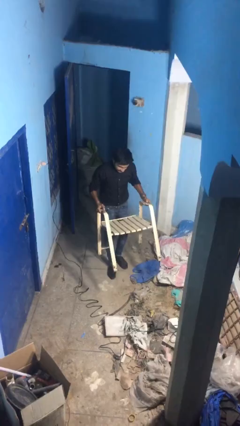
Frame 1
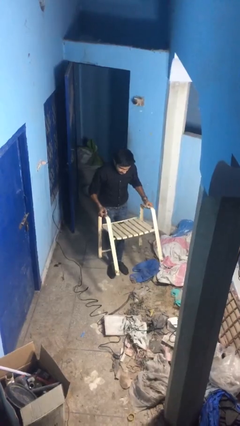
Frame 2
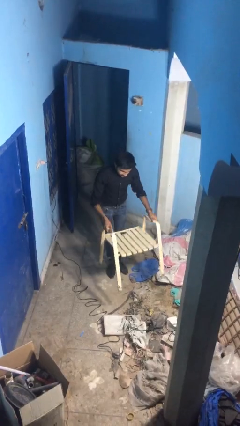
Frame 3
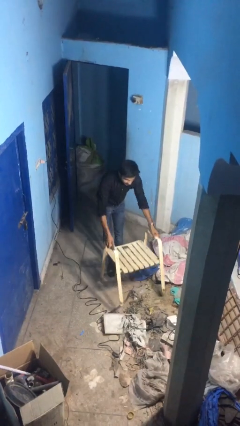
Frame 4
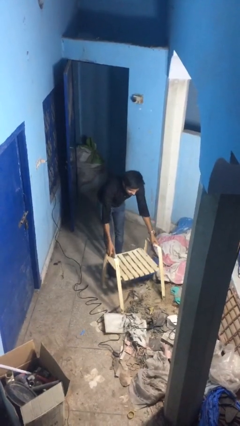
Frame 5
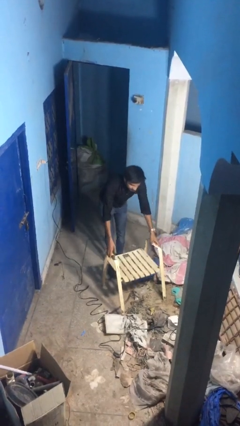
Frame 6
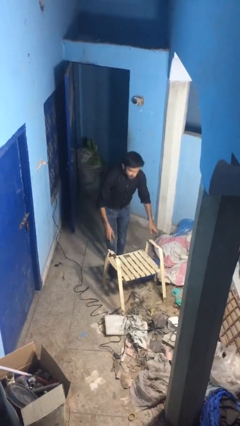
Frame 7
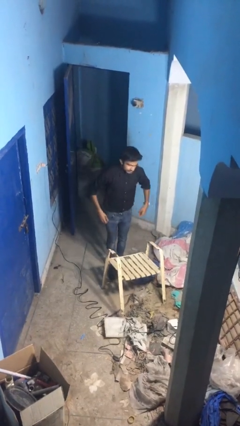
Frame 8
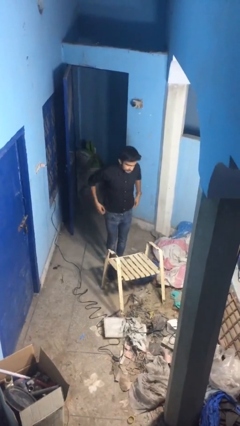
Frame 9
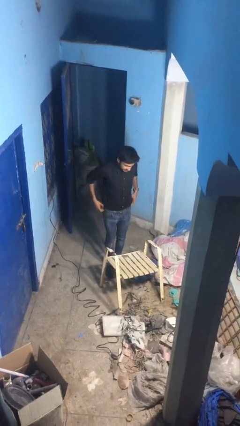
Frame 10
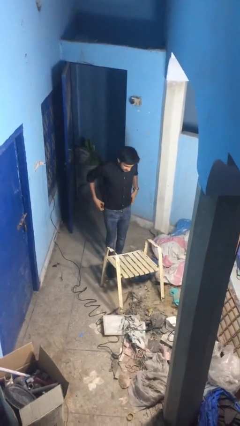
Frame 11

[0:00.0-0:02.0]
person puts down object on floor

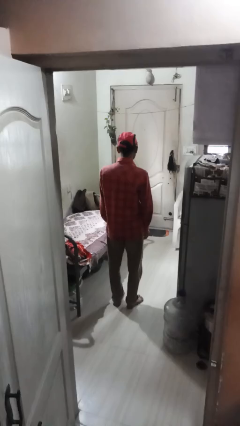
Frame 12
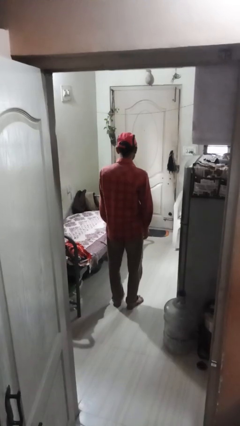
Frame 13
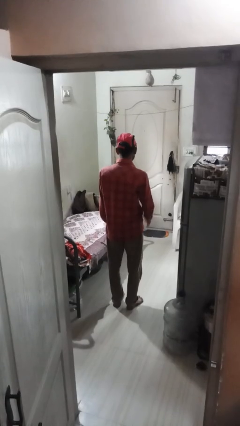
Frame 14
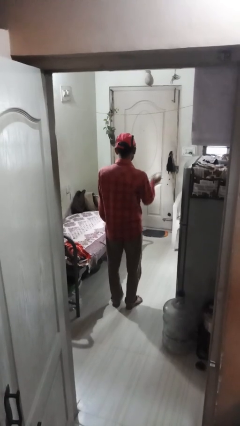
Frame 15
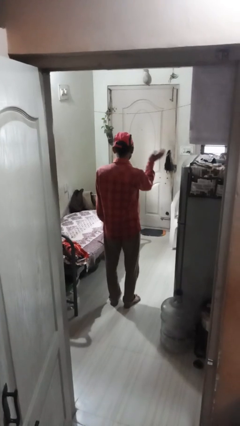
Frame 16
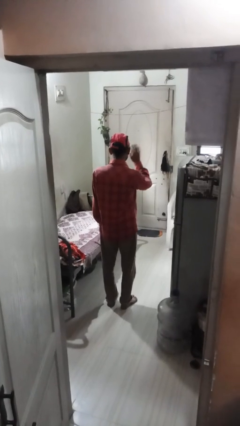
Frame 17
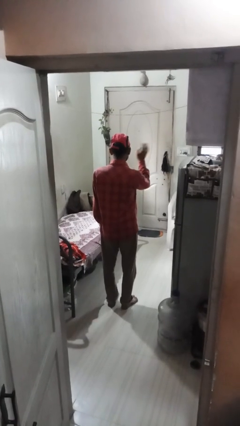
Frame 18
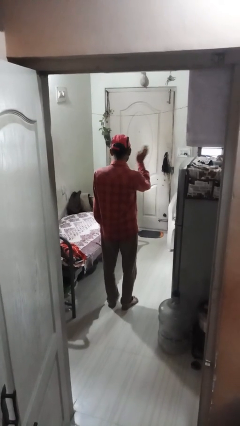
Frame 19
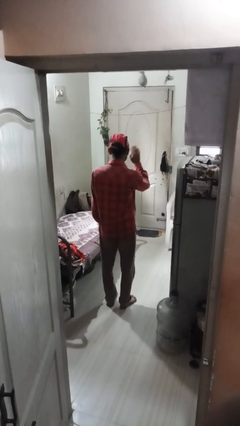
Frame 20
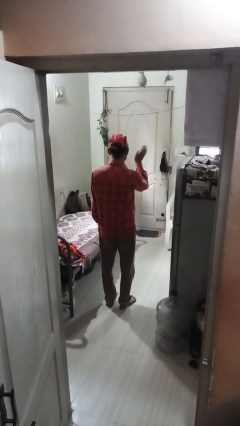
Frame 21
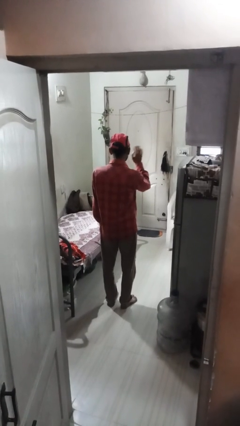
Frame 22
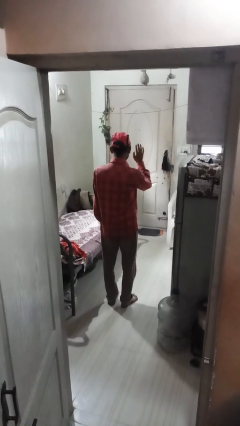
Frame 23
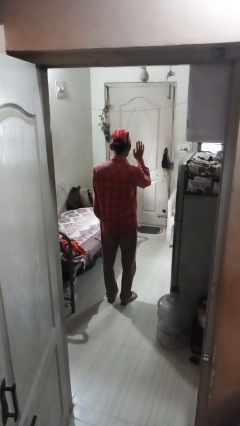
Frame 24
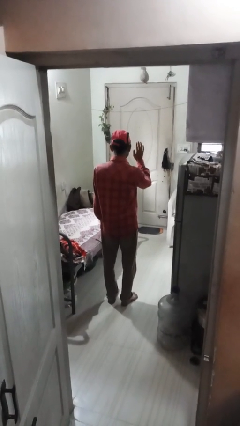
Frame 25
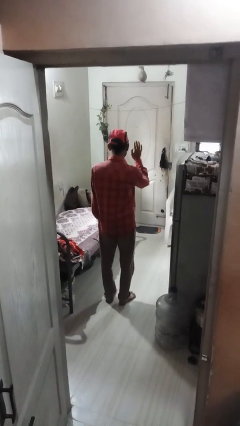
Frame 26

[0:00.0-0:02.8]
person waves at person

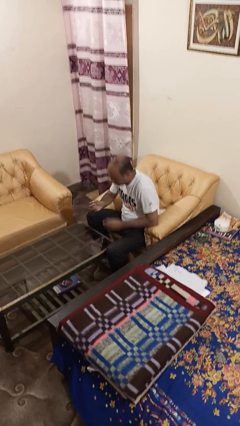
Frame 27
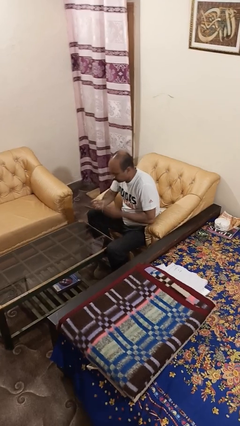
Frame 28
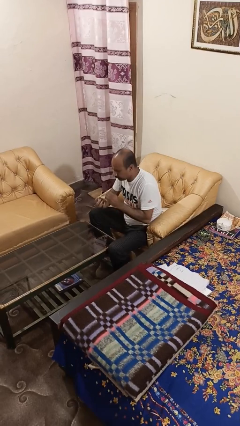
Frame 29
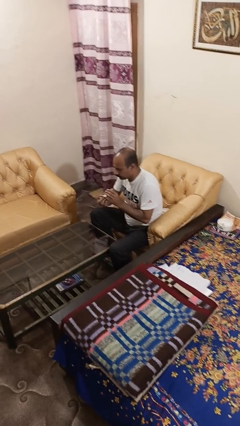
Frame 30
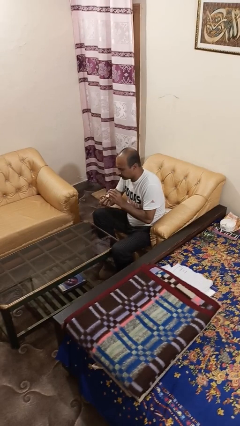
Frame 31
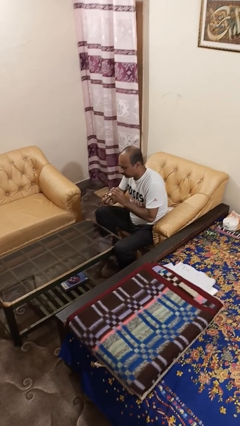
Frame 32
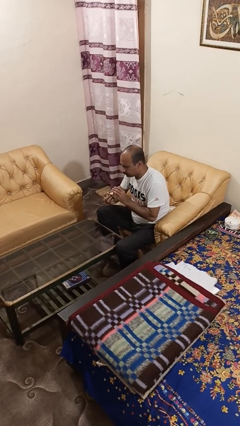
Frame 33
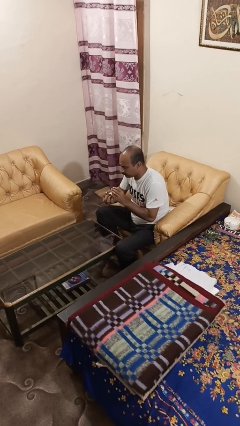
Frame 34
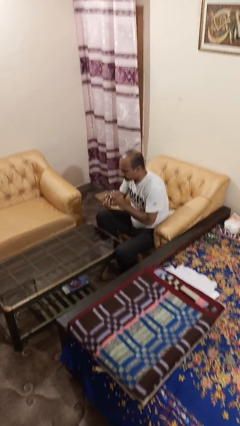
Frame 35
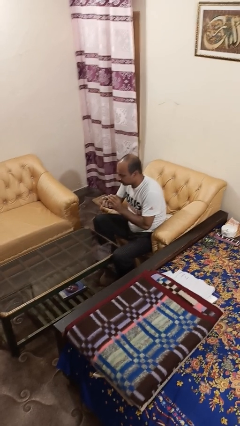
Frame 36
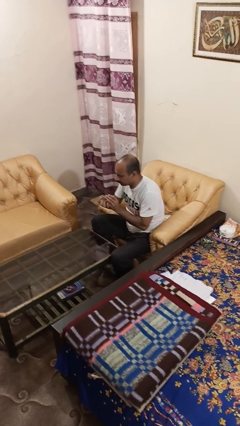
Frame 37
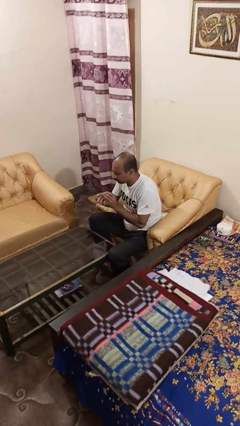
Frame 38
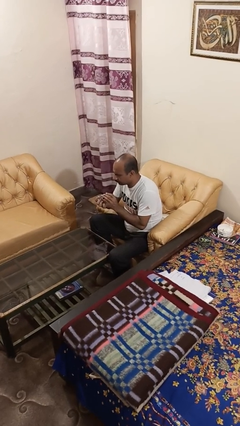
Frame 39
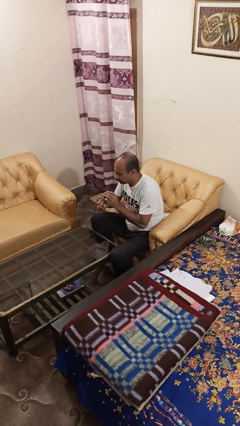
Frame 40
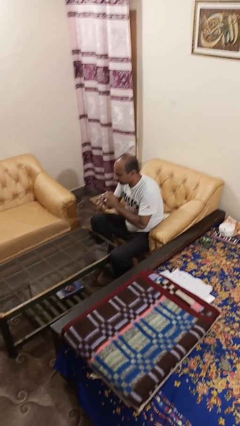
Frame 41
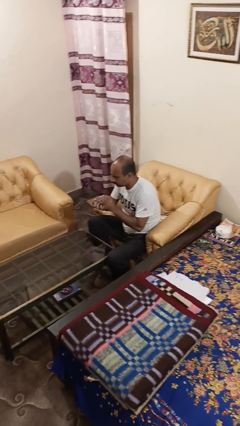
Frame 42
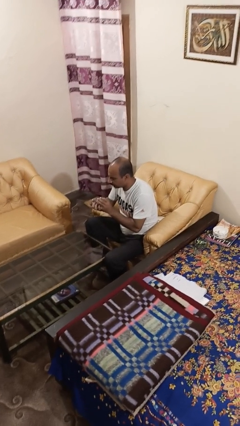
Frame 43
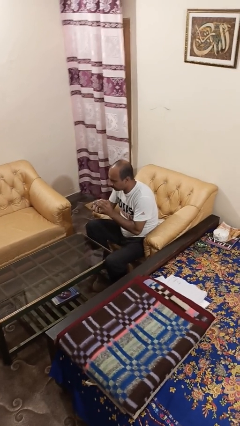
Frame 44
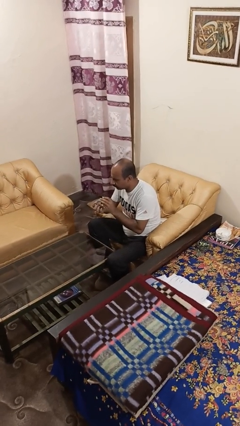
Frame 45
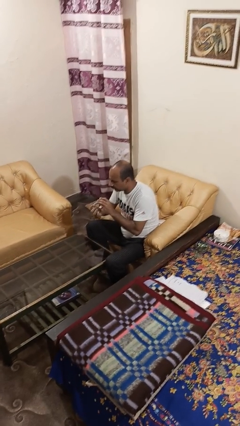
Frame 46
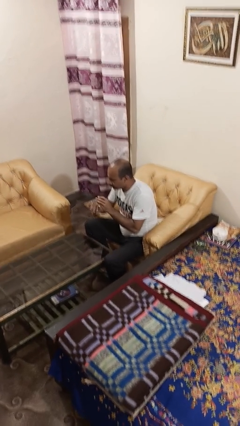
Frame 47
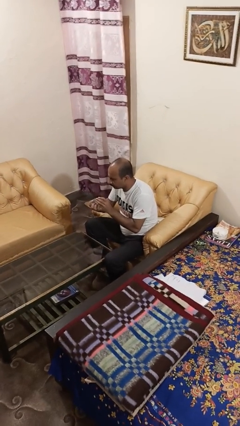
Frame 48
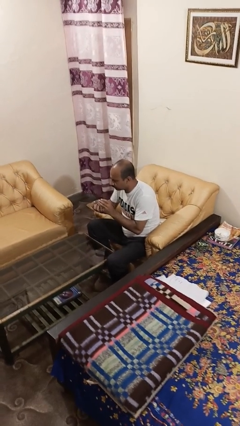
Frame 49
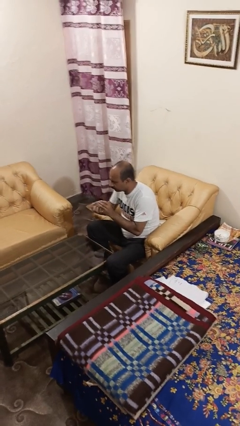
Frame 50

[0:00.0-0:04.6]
person clips fingernails

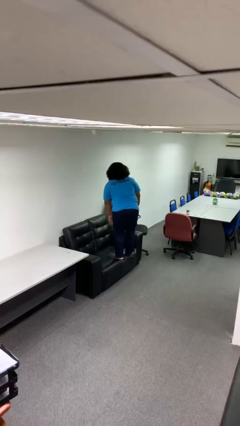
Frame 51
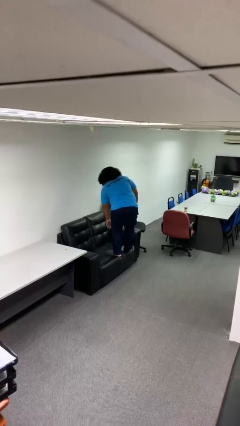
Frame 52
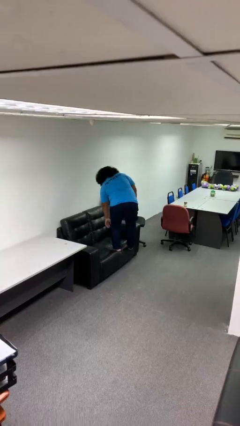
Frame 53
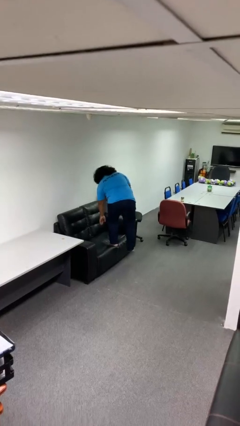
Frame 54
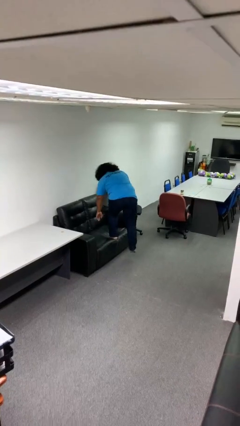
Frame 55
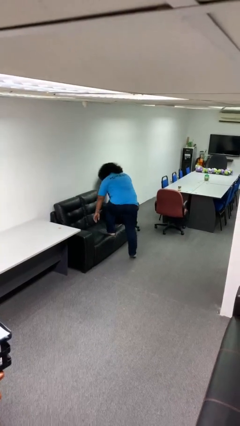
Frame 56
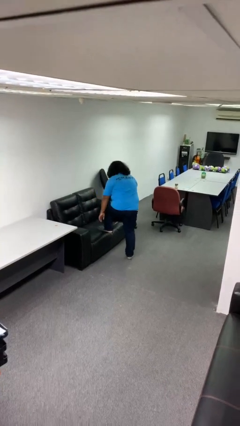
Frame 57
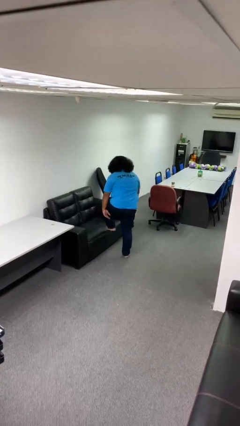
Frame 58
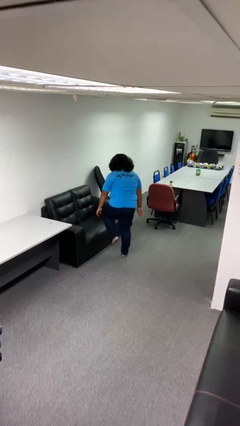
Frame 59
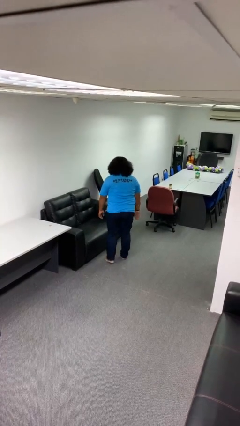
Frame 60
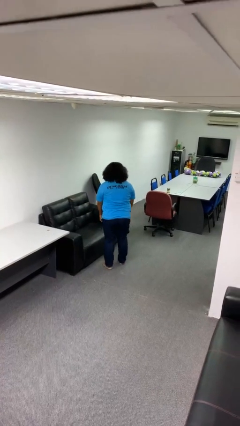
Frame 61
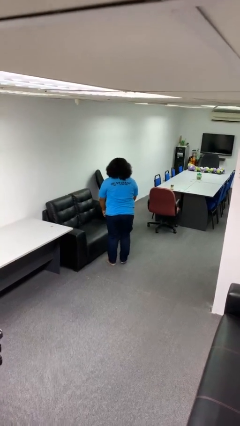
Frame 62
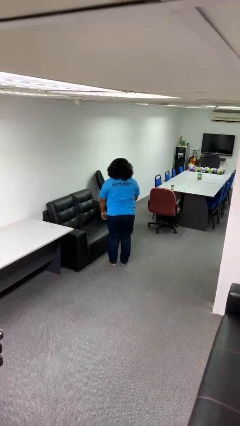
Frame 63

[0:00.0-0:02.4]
person climbs off couch

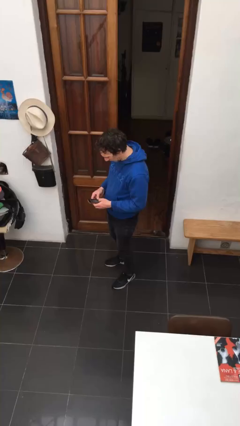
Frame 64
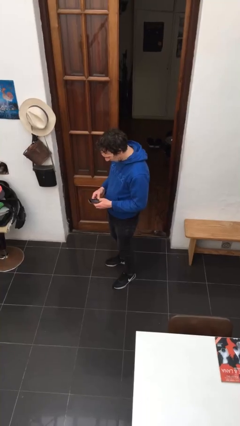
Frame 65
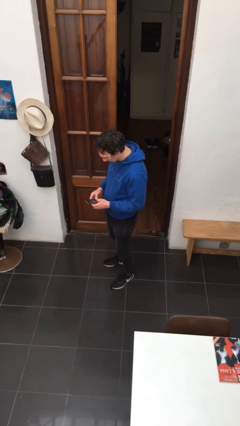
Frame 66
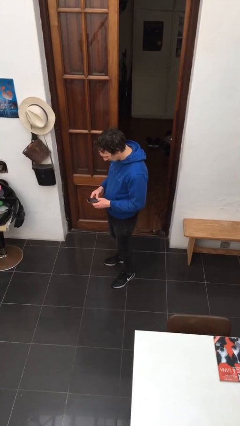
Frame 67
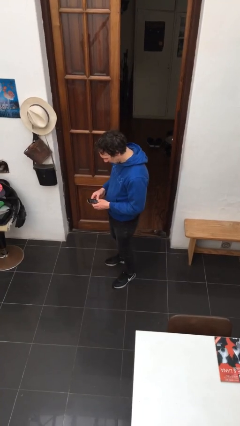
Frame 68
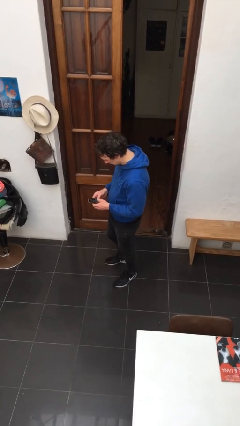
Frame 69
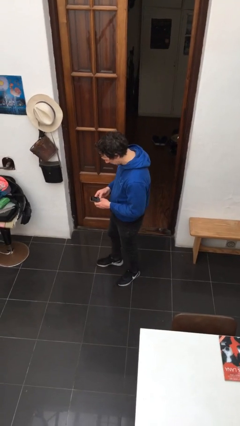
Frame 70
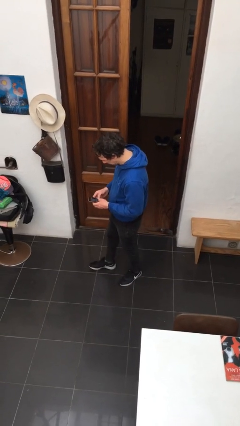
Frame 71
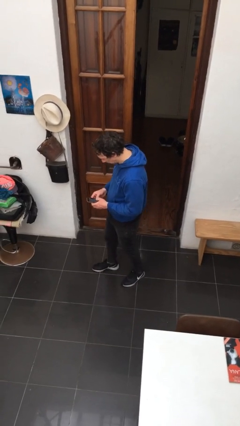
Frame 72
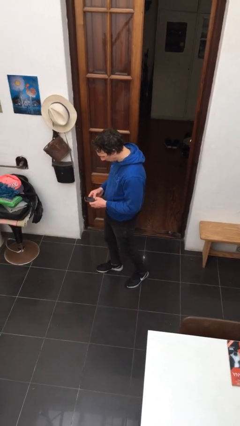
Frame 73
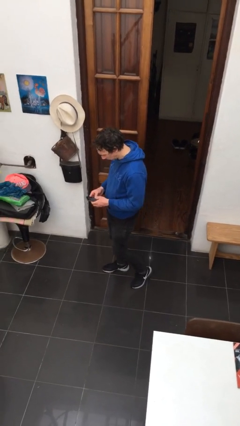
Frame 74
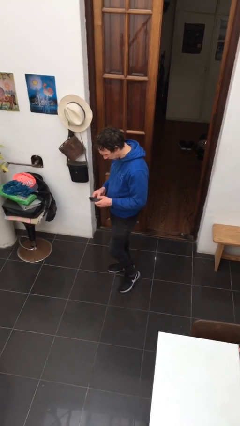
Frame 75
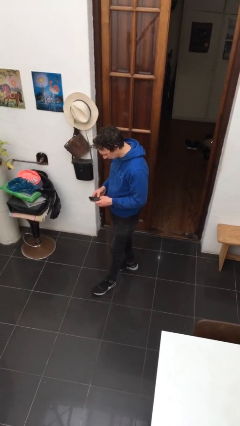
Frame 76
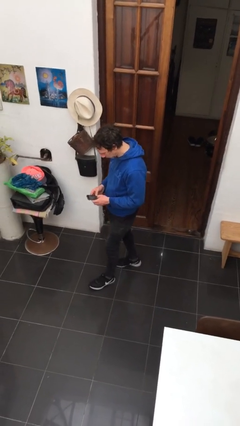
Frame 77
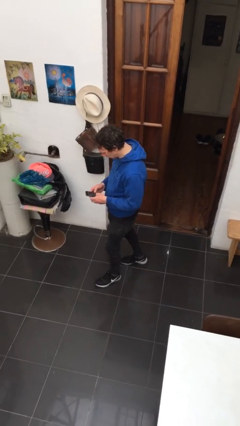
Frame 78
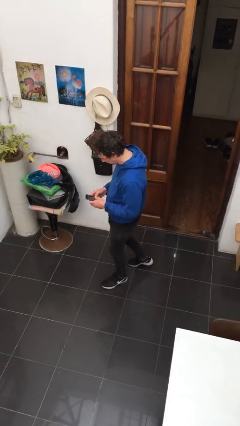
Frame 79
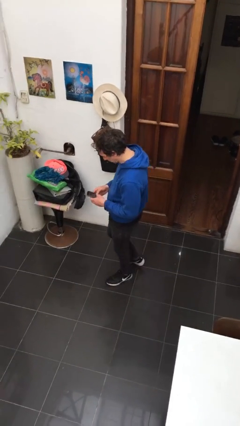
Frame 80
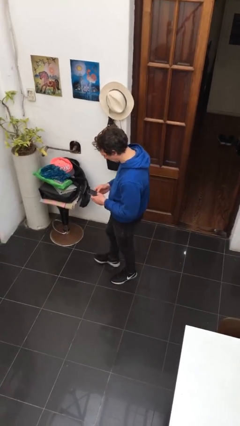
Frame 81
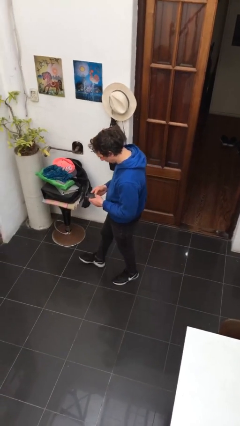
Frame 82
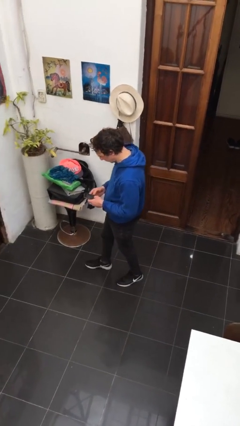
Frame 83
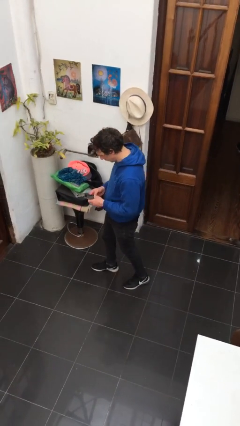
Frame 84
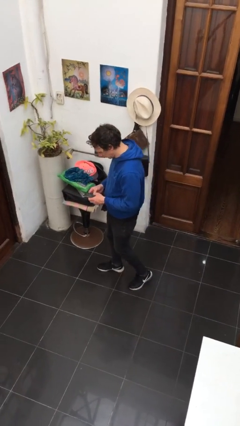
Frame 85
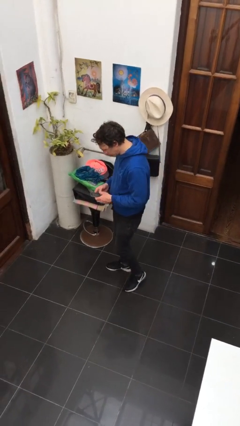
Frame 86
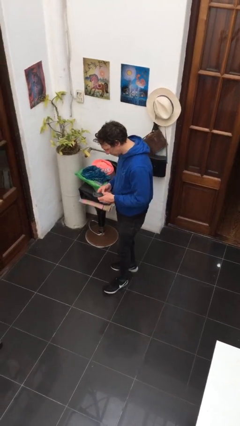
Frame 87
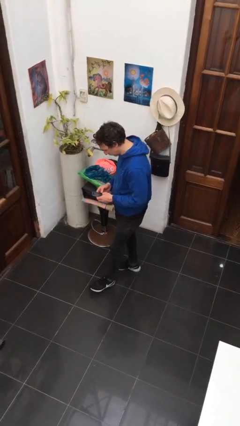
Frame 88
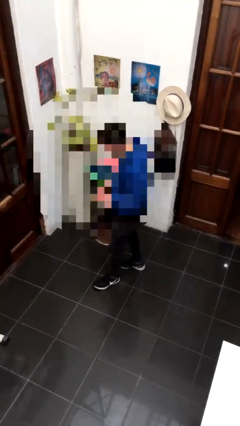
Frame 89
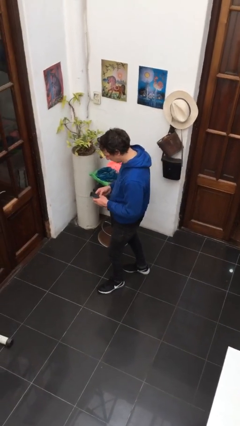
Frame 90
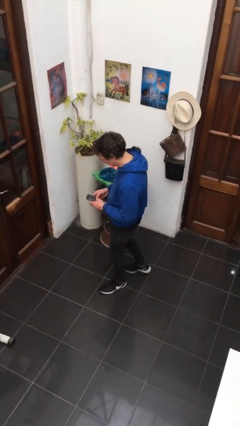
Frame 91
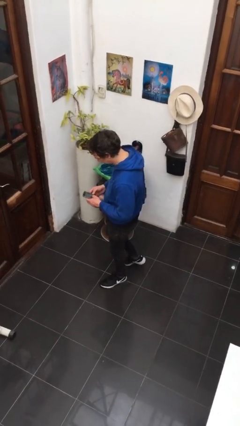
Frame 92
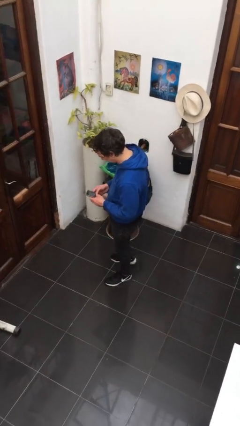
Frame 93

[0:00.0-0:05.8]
person texts on phone
